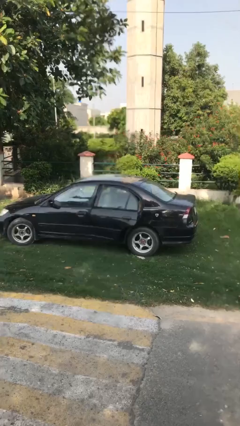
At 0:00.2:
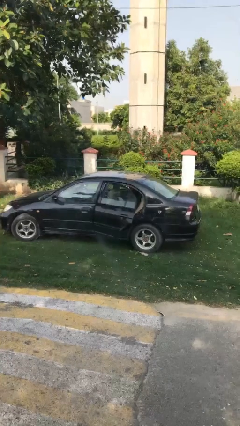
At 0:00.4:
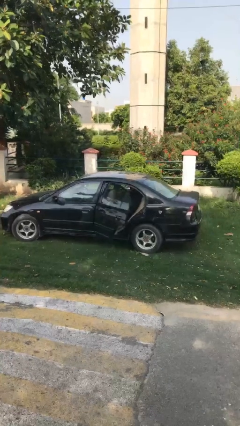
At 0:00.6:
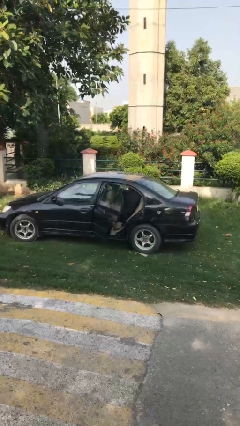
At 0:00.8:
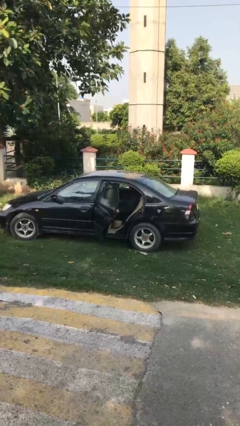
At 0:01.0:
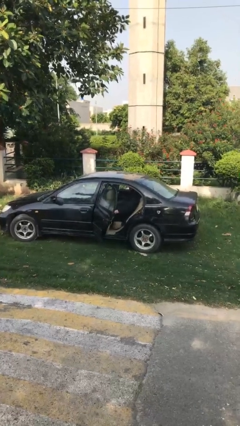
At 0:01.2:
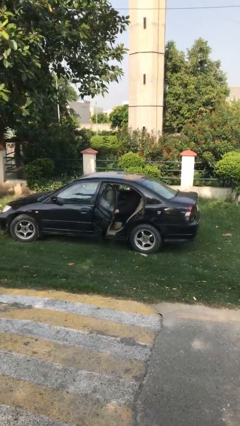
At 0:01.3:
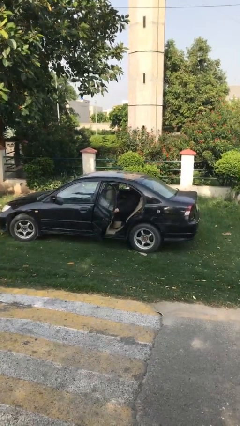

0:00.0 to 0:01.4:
person opens car door

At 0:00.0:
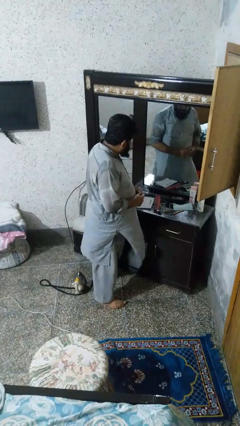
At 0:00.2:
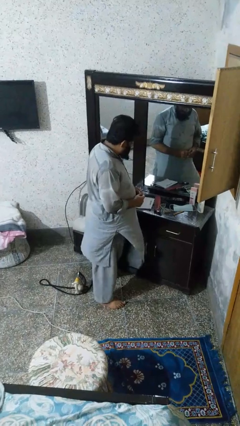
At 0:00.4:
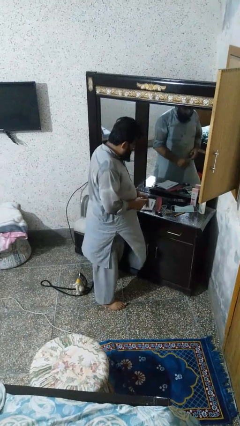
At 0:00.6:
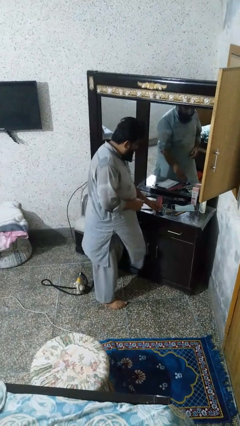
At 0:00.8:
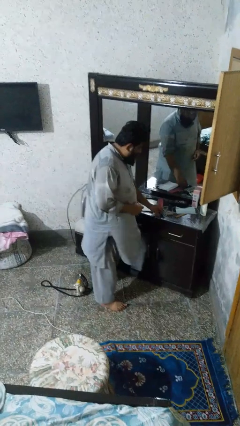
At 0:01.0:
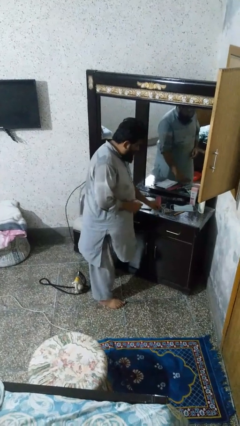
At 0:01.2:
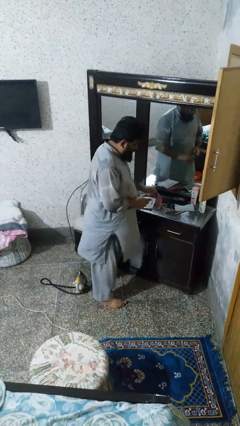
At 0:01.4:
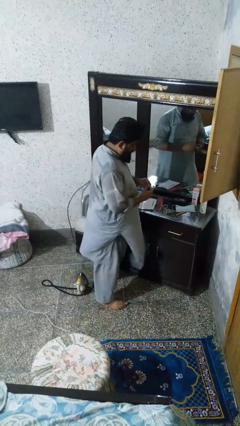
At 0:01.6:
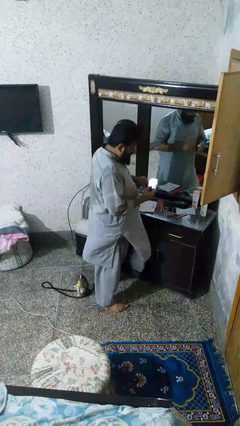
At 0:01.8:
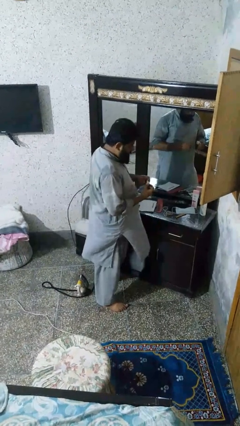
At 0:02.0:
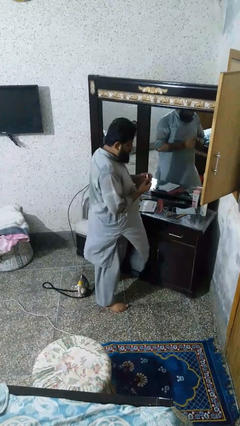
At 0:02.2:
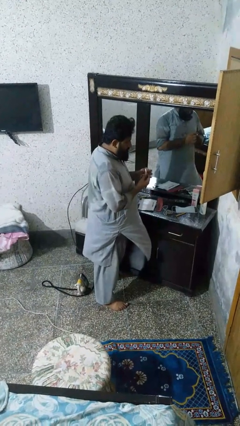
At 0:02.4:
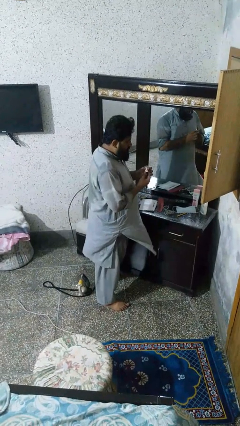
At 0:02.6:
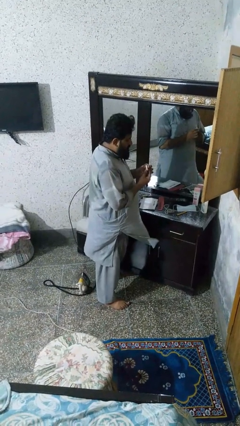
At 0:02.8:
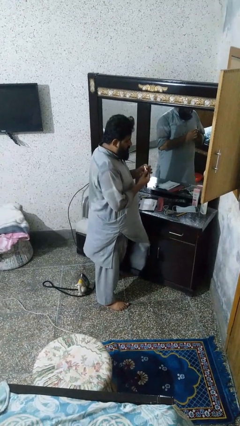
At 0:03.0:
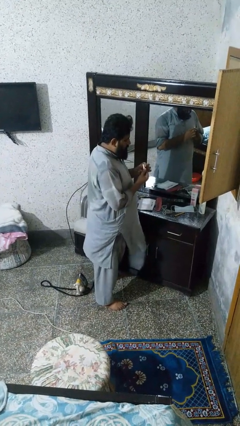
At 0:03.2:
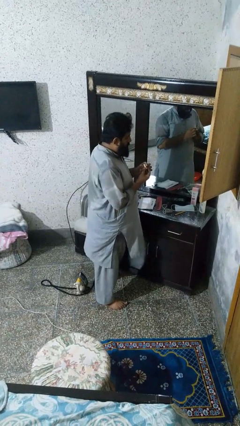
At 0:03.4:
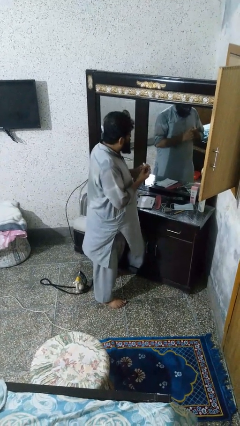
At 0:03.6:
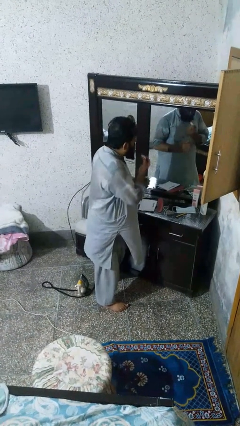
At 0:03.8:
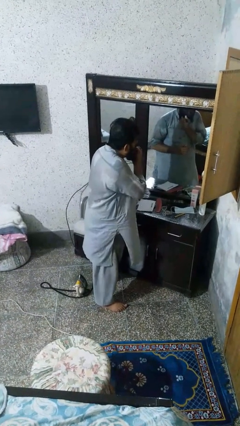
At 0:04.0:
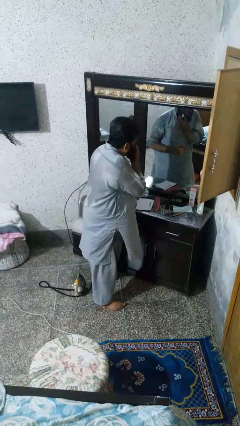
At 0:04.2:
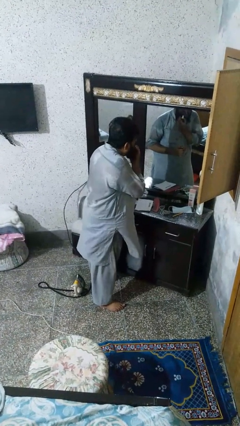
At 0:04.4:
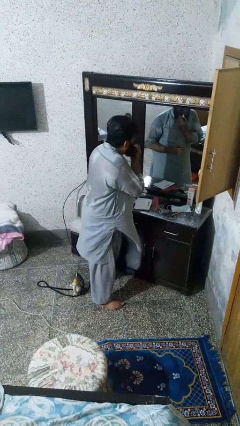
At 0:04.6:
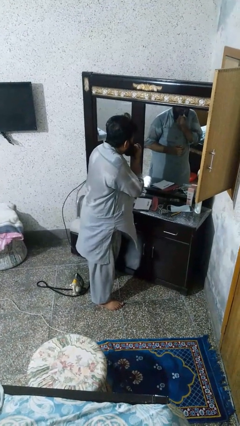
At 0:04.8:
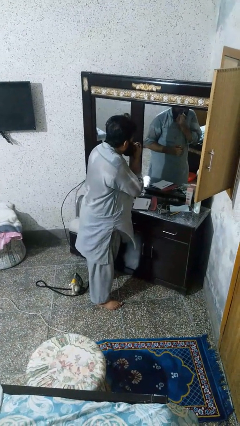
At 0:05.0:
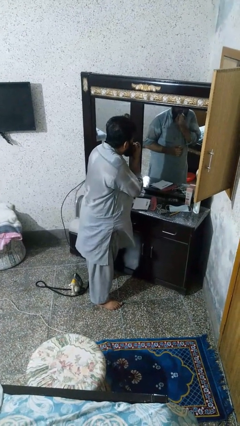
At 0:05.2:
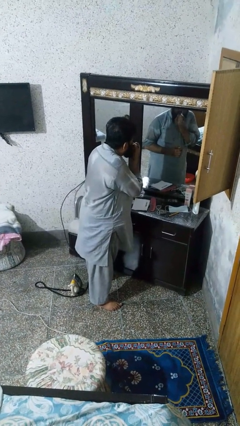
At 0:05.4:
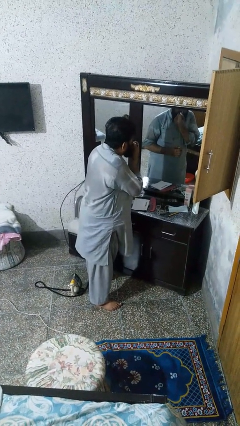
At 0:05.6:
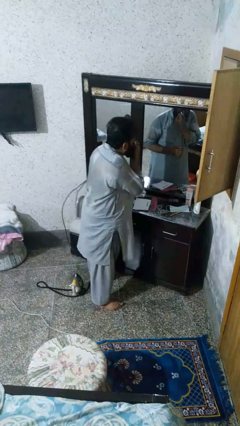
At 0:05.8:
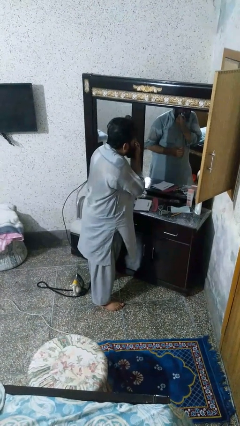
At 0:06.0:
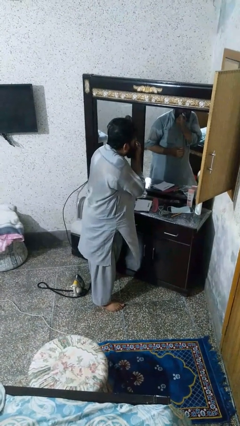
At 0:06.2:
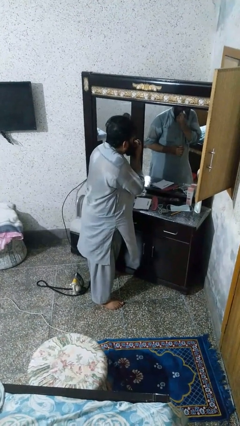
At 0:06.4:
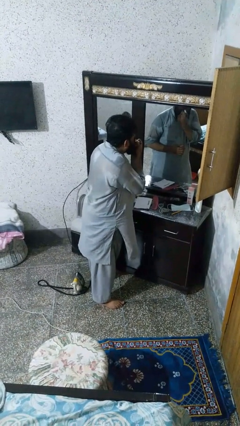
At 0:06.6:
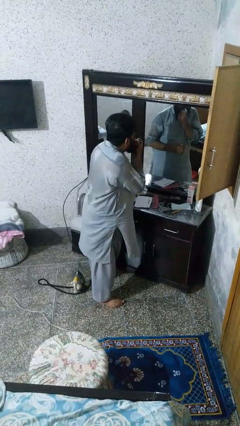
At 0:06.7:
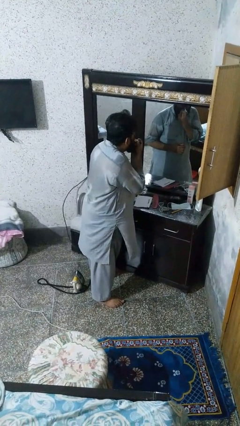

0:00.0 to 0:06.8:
person applies lip makeup

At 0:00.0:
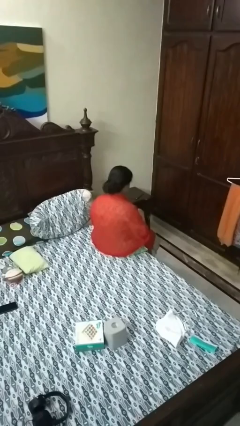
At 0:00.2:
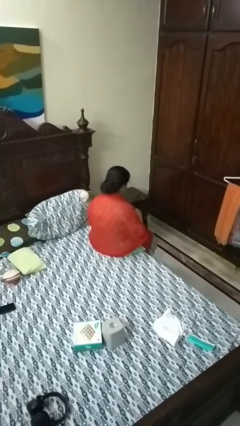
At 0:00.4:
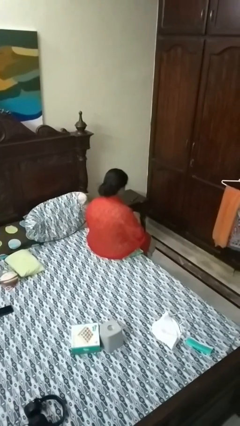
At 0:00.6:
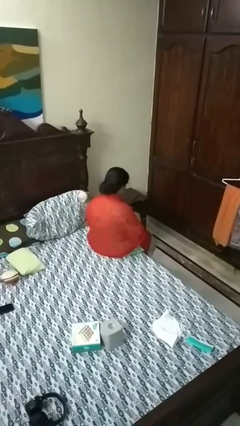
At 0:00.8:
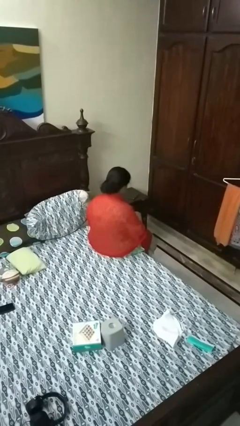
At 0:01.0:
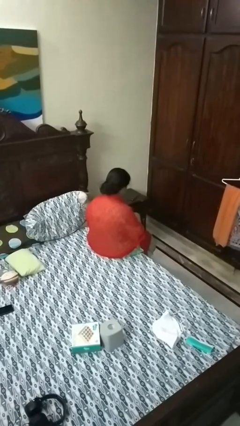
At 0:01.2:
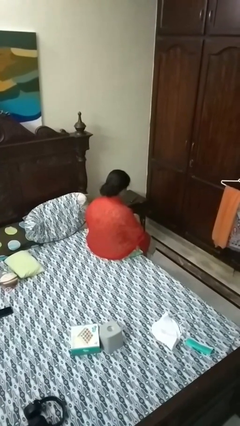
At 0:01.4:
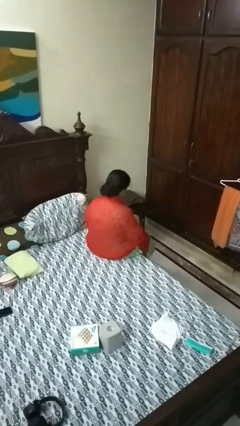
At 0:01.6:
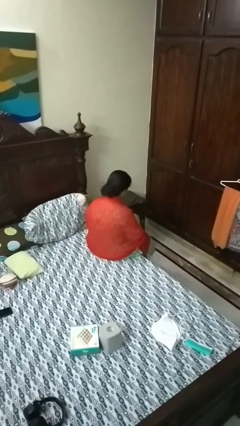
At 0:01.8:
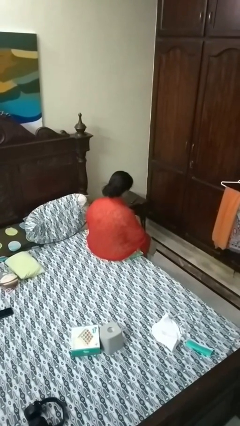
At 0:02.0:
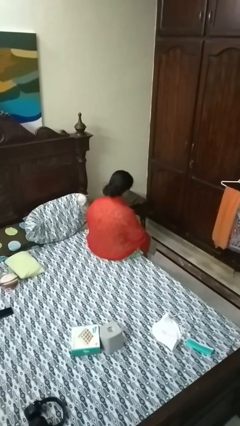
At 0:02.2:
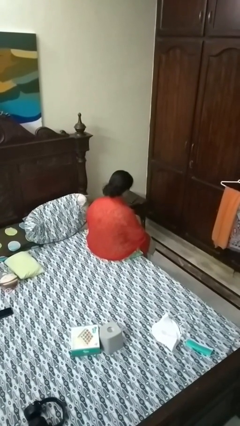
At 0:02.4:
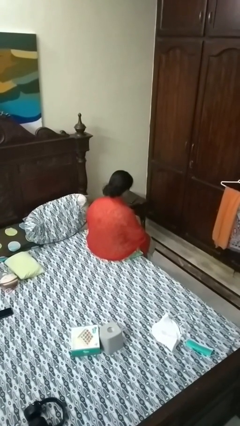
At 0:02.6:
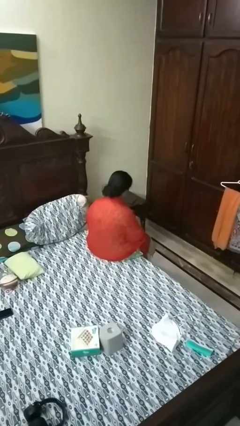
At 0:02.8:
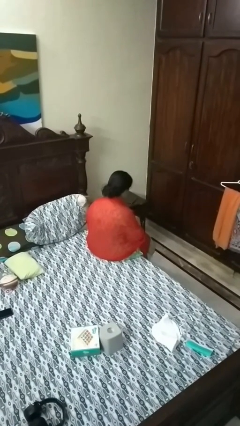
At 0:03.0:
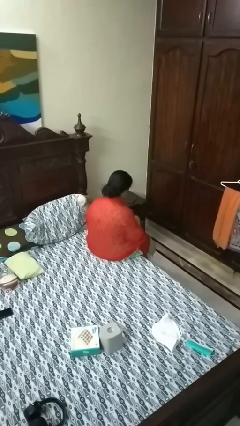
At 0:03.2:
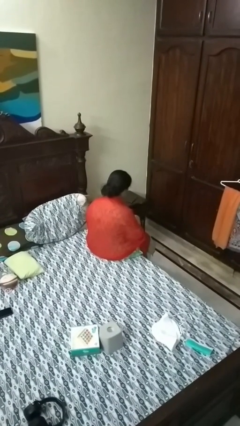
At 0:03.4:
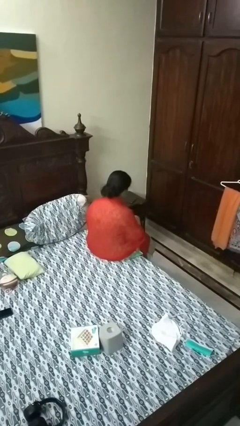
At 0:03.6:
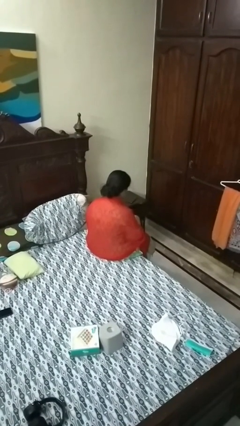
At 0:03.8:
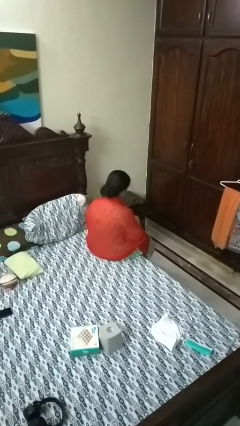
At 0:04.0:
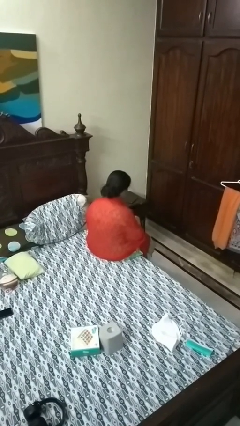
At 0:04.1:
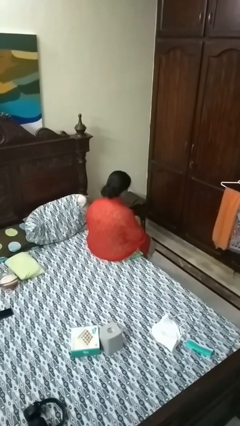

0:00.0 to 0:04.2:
person searches in purse

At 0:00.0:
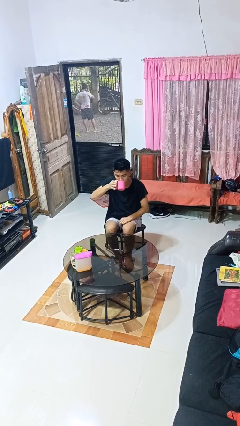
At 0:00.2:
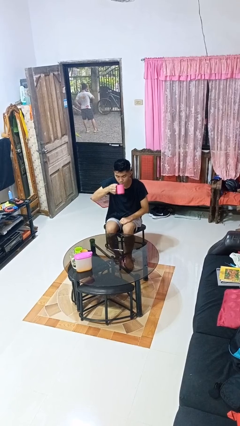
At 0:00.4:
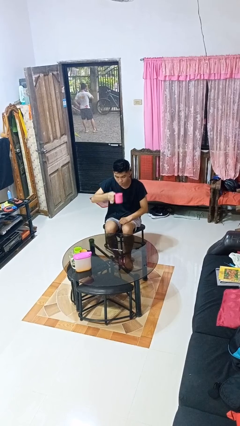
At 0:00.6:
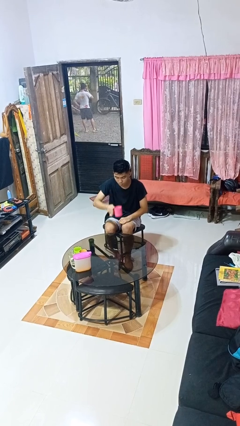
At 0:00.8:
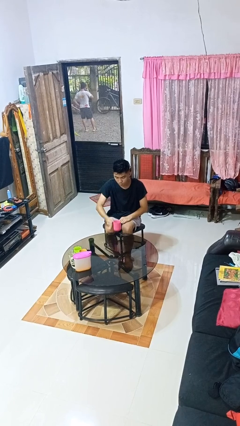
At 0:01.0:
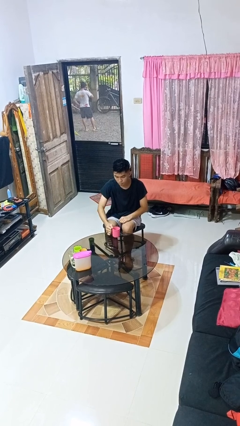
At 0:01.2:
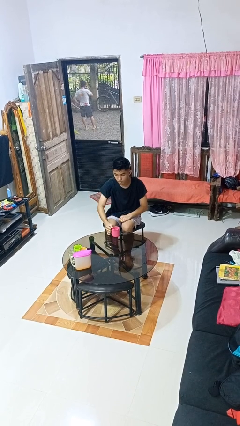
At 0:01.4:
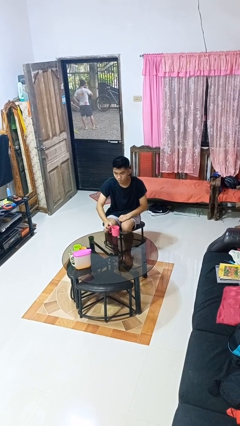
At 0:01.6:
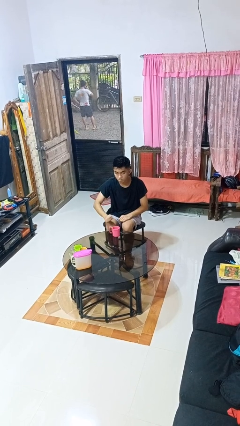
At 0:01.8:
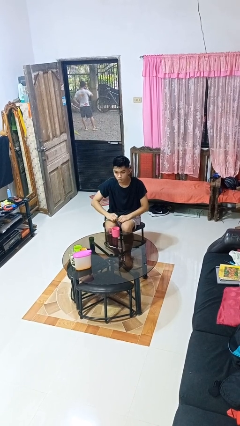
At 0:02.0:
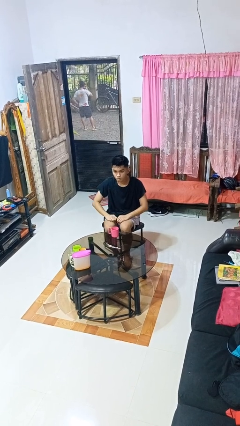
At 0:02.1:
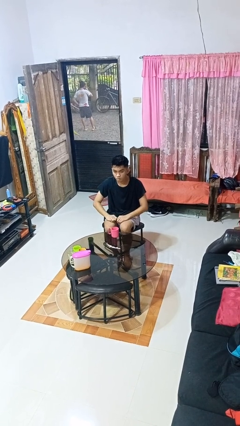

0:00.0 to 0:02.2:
person puts down object on table

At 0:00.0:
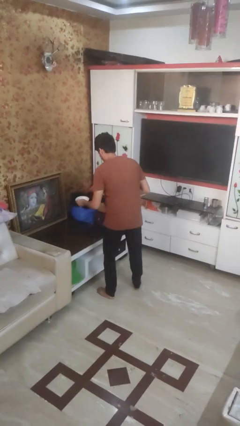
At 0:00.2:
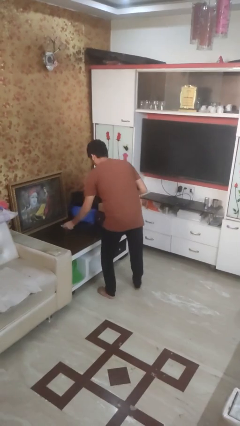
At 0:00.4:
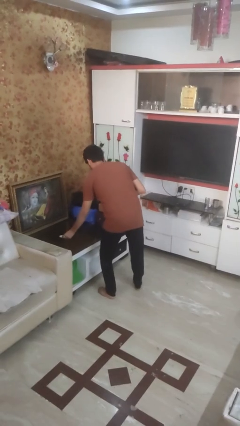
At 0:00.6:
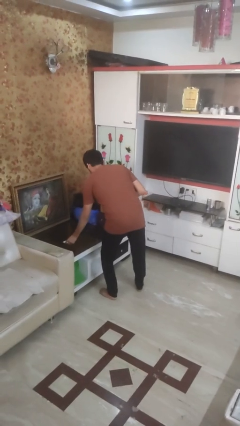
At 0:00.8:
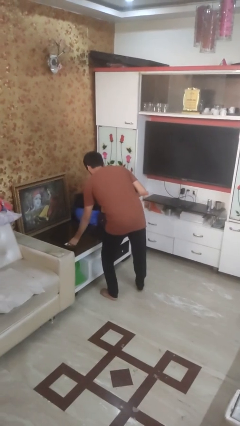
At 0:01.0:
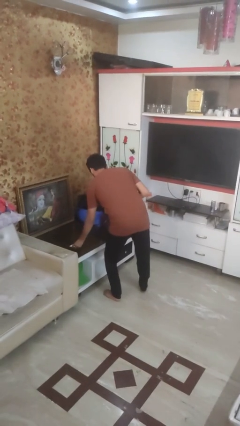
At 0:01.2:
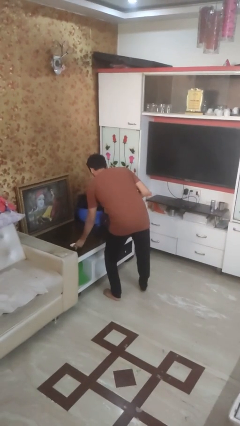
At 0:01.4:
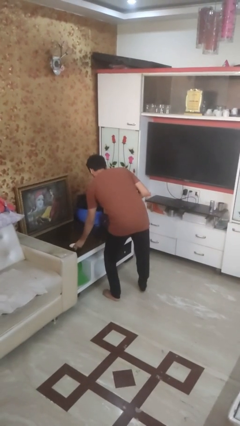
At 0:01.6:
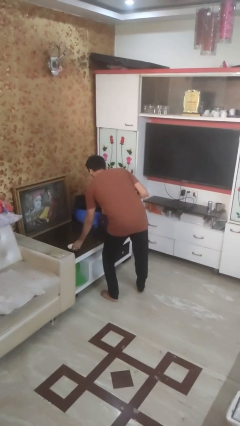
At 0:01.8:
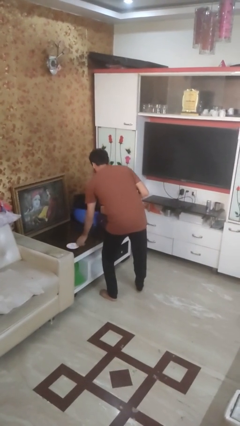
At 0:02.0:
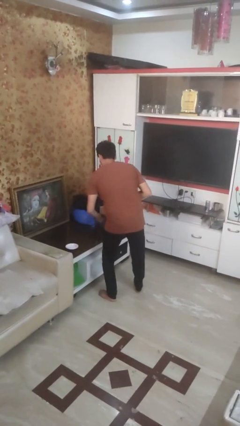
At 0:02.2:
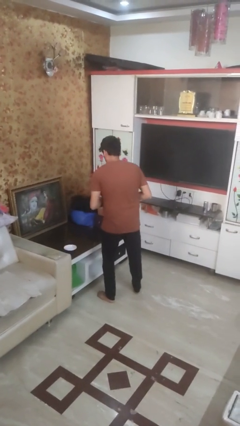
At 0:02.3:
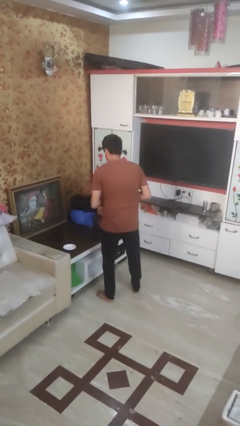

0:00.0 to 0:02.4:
person sets table

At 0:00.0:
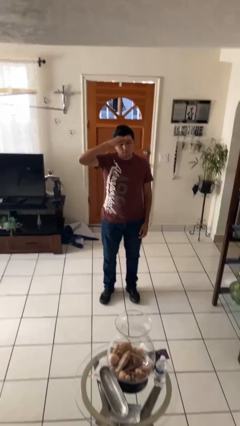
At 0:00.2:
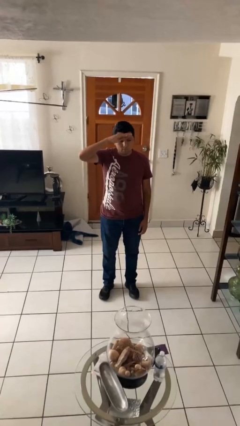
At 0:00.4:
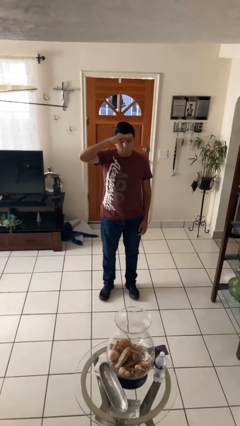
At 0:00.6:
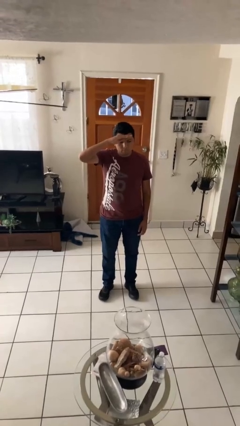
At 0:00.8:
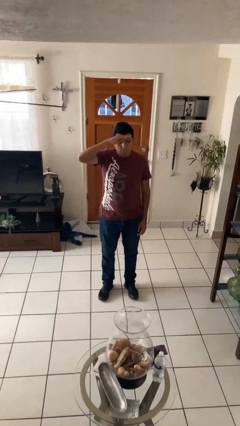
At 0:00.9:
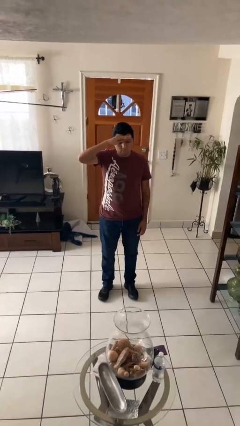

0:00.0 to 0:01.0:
person salutes
